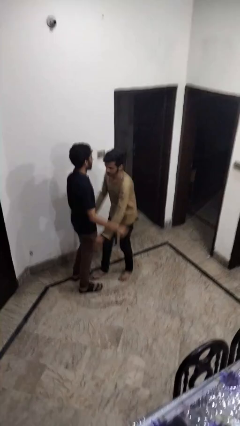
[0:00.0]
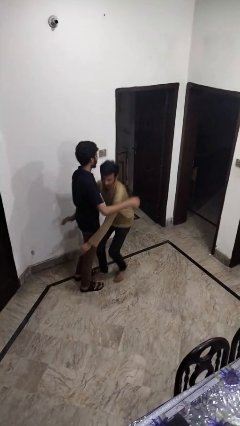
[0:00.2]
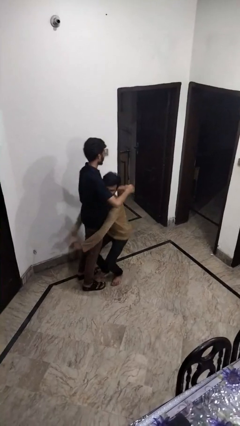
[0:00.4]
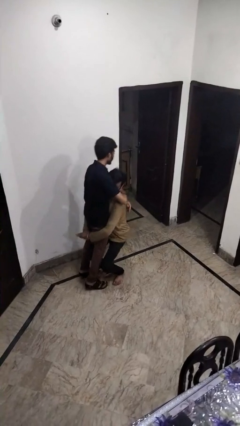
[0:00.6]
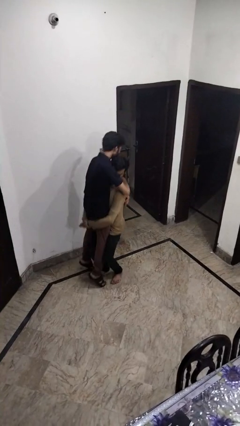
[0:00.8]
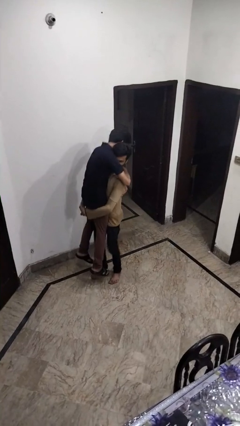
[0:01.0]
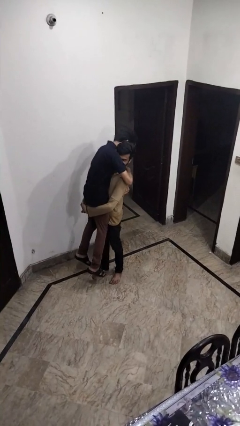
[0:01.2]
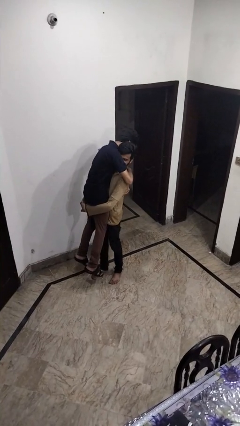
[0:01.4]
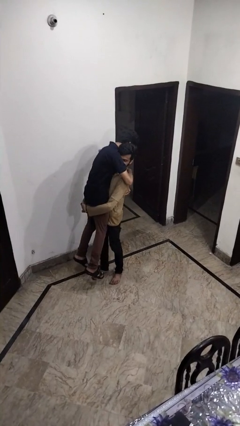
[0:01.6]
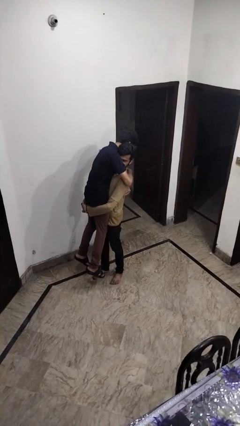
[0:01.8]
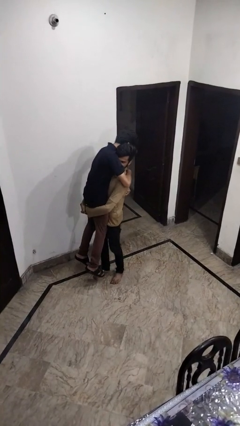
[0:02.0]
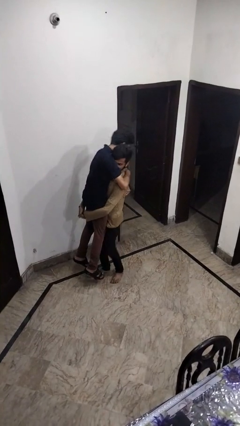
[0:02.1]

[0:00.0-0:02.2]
person picks up person

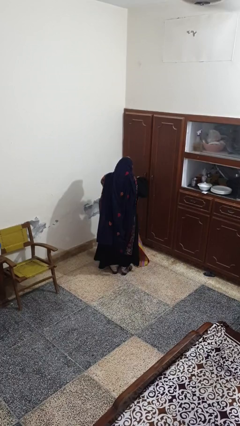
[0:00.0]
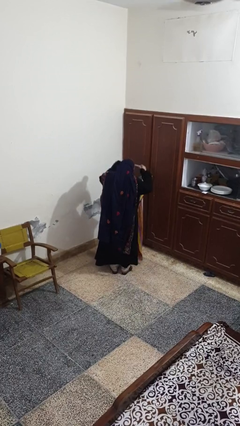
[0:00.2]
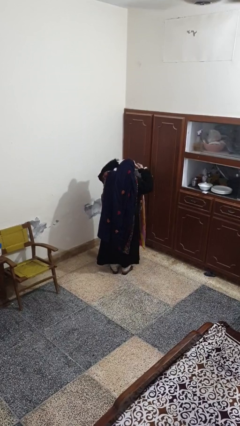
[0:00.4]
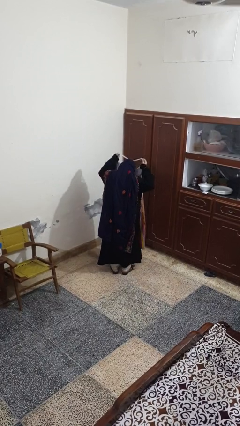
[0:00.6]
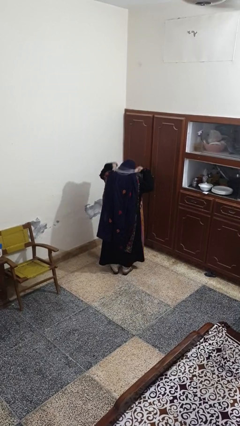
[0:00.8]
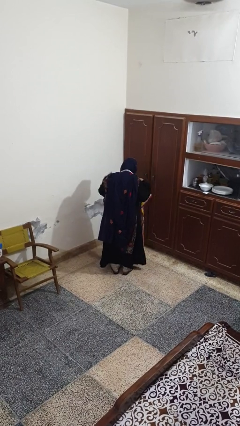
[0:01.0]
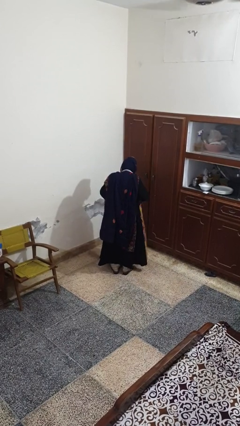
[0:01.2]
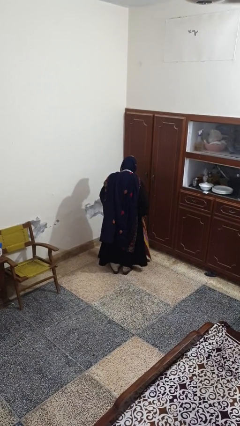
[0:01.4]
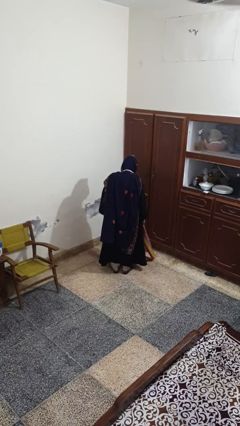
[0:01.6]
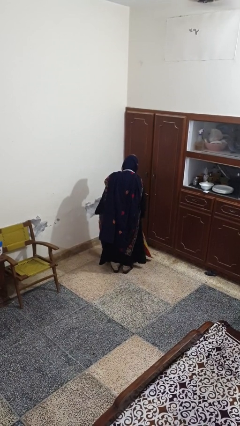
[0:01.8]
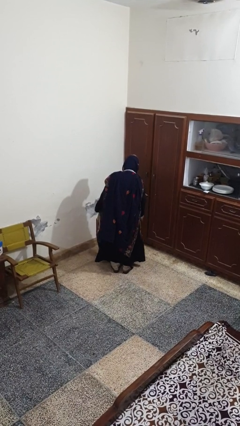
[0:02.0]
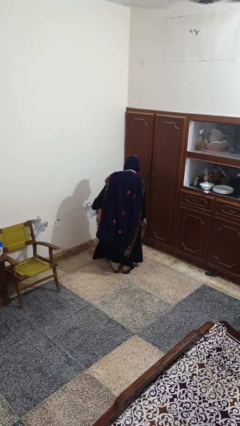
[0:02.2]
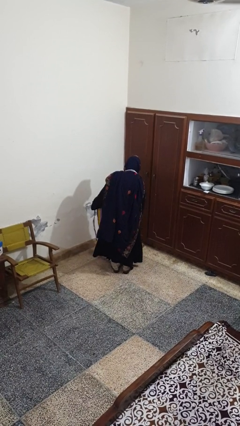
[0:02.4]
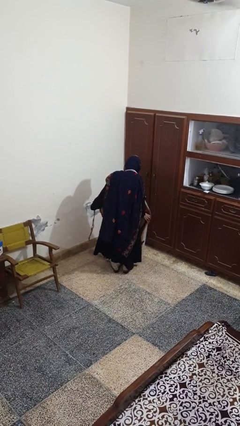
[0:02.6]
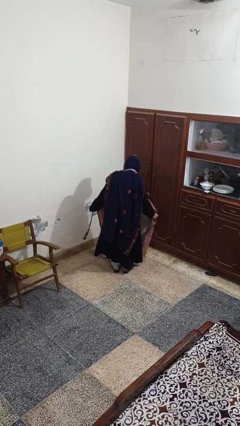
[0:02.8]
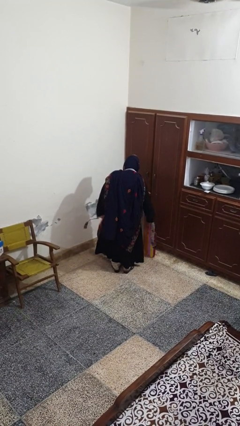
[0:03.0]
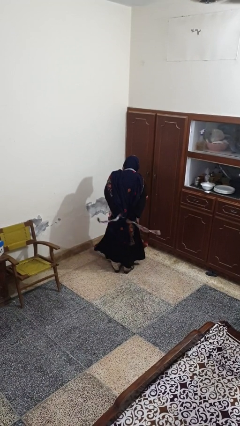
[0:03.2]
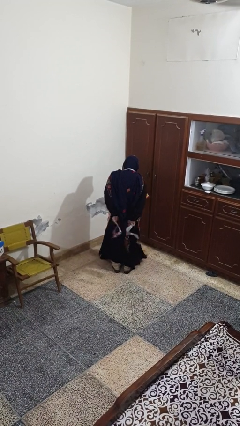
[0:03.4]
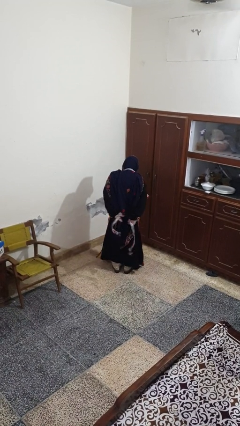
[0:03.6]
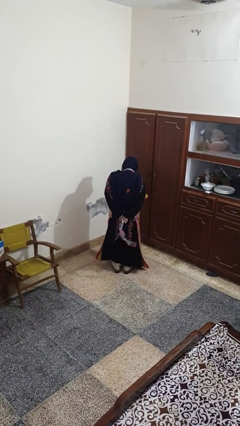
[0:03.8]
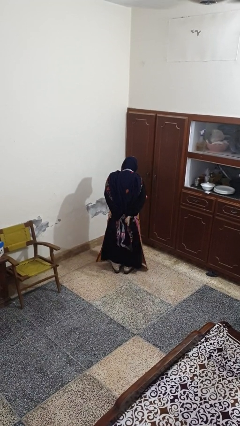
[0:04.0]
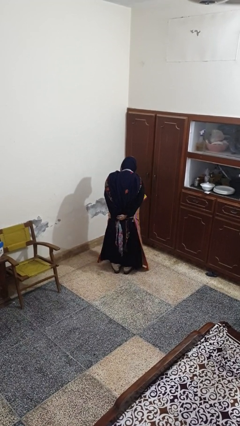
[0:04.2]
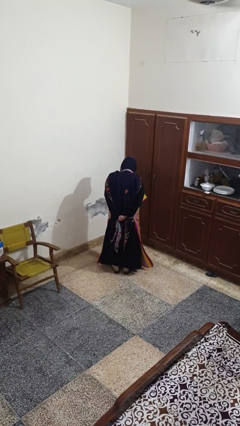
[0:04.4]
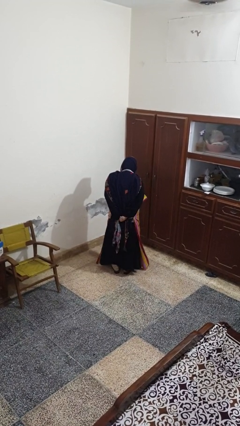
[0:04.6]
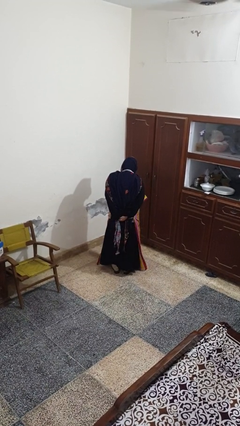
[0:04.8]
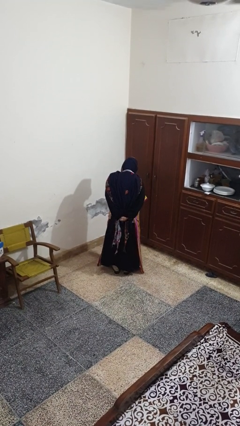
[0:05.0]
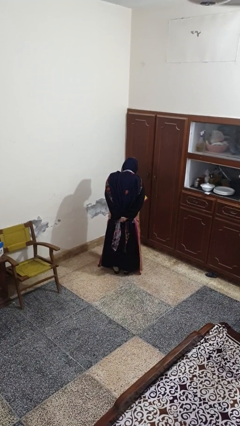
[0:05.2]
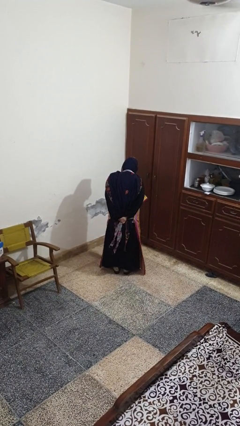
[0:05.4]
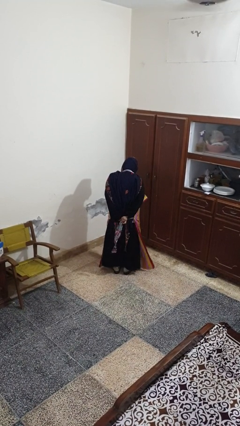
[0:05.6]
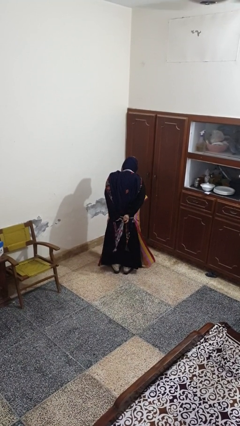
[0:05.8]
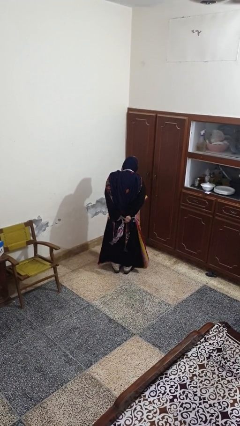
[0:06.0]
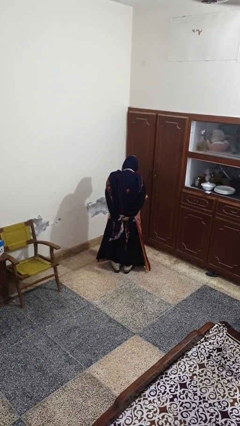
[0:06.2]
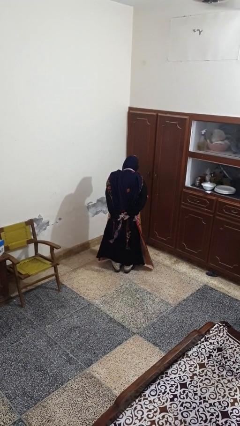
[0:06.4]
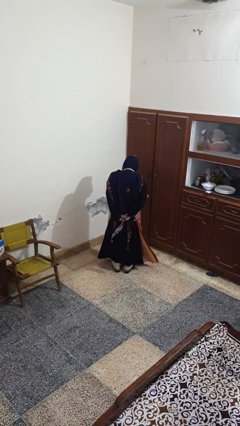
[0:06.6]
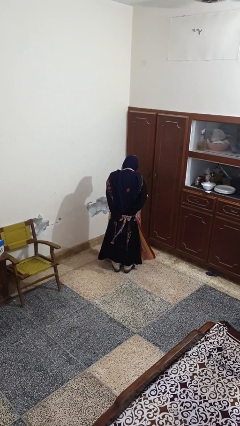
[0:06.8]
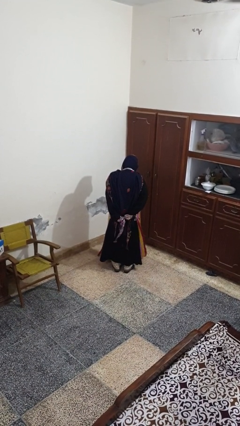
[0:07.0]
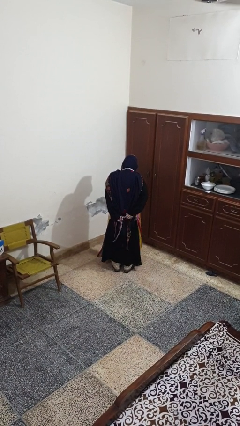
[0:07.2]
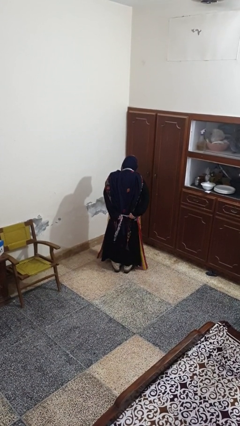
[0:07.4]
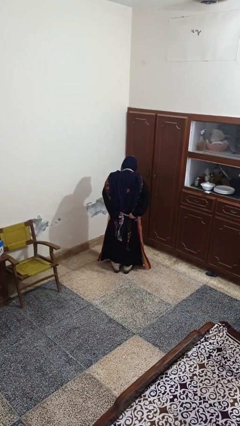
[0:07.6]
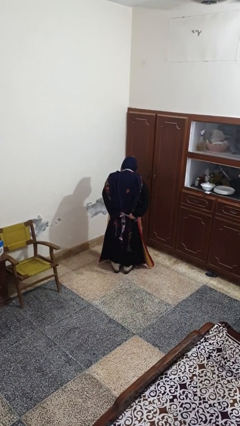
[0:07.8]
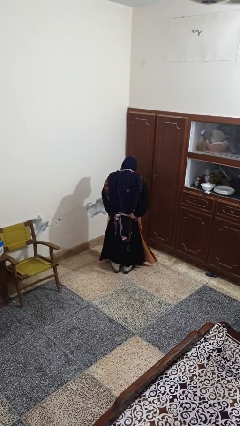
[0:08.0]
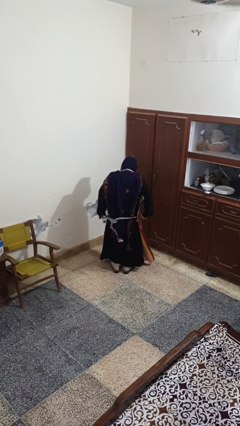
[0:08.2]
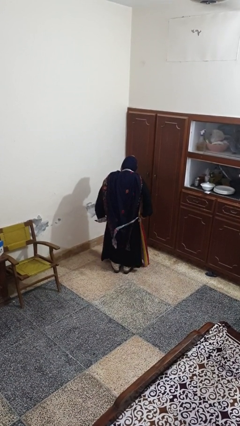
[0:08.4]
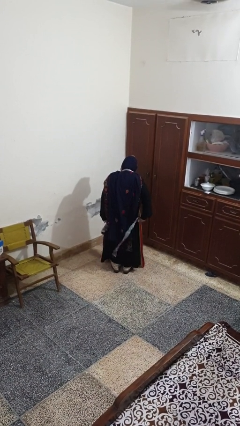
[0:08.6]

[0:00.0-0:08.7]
person puts on apron

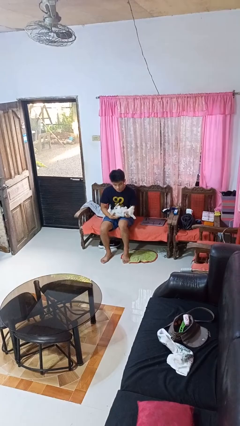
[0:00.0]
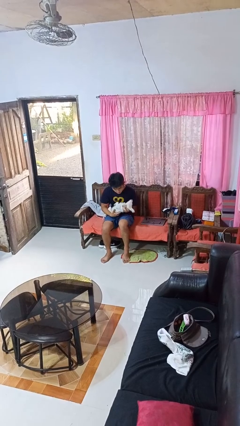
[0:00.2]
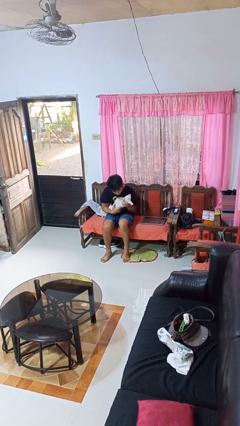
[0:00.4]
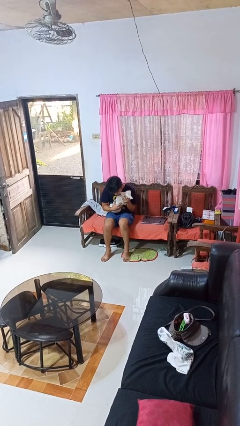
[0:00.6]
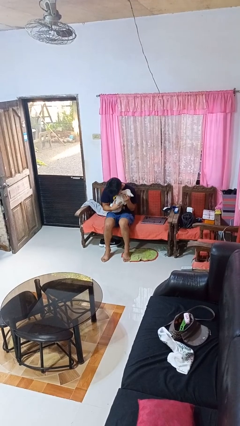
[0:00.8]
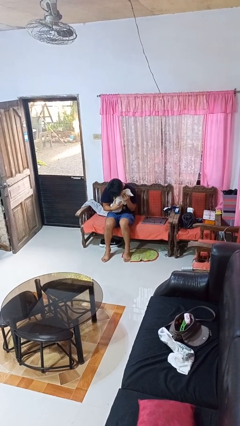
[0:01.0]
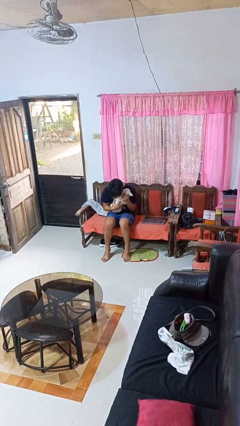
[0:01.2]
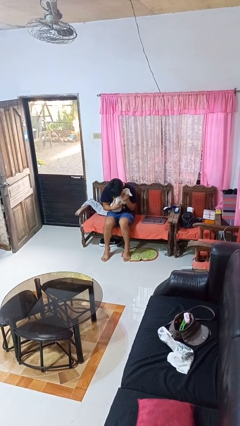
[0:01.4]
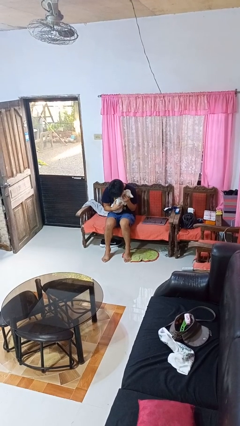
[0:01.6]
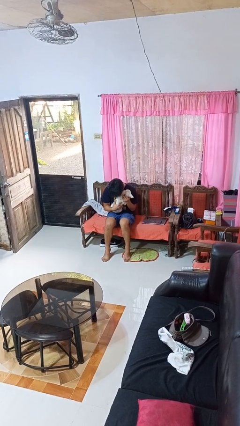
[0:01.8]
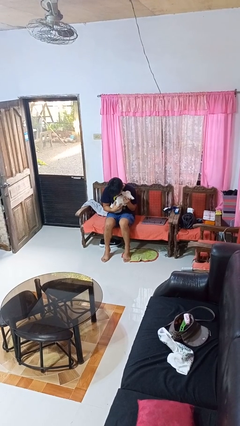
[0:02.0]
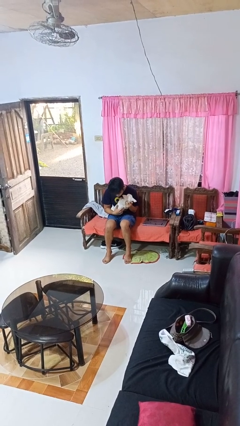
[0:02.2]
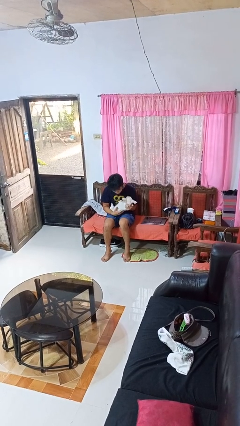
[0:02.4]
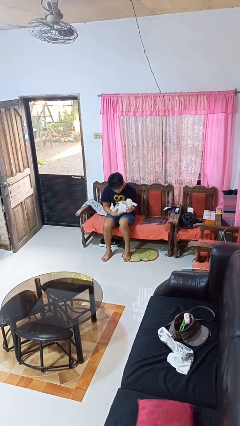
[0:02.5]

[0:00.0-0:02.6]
person hugs dog

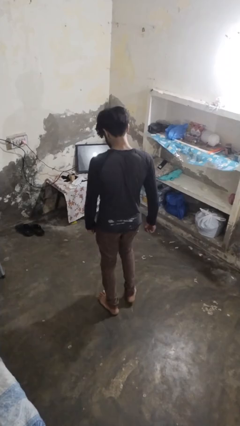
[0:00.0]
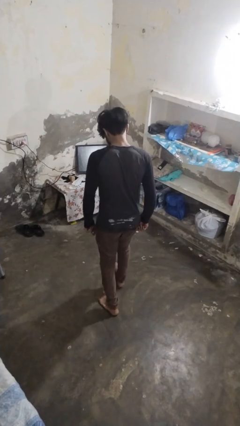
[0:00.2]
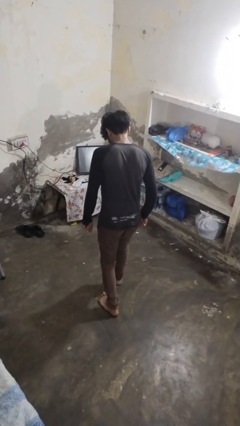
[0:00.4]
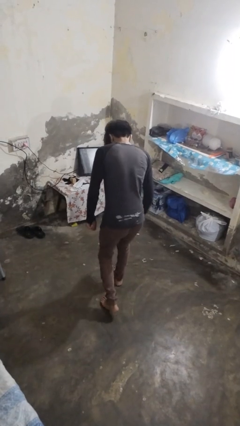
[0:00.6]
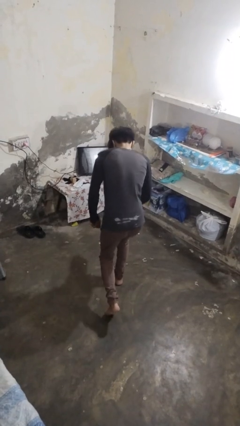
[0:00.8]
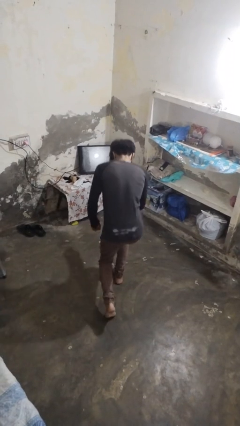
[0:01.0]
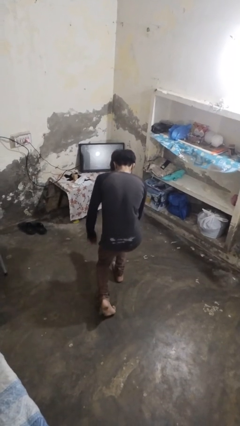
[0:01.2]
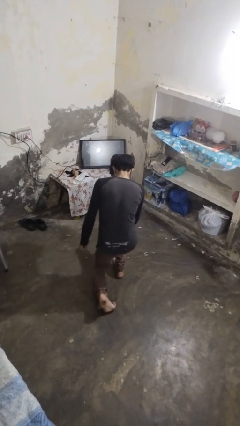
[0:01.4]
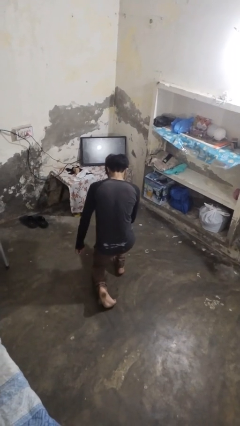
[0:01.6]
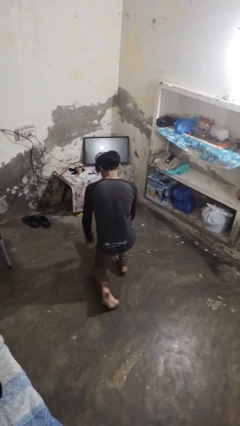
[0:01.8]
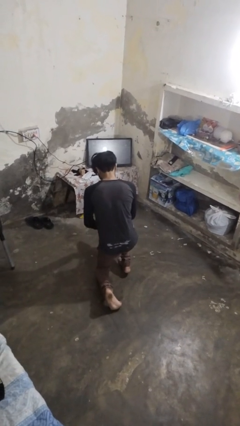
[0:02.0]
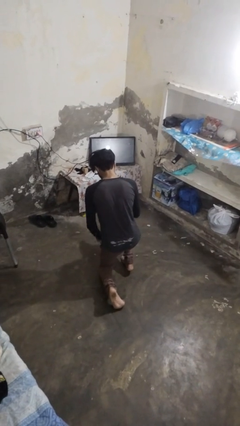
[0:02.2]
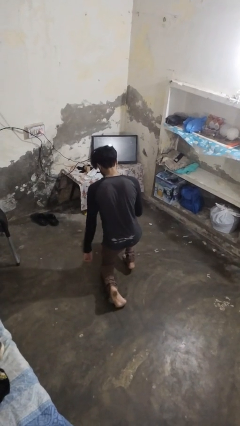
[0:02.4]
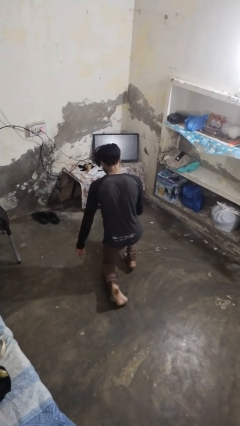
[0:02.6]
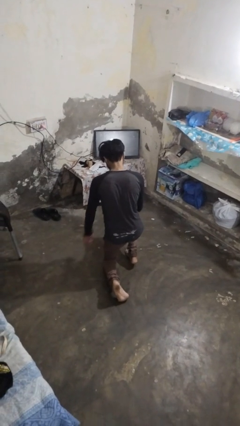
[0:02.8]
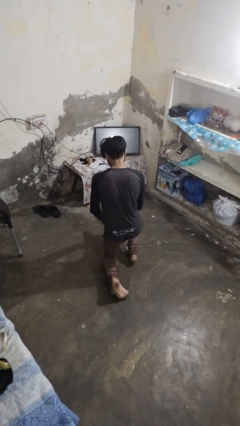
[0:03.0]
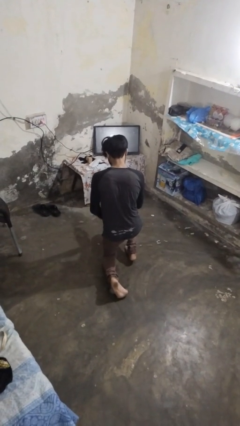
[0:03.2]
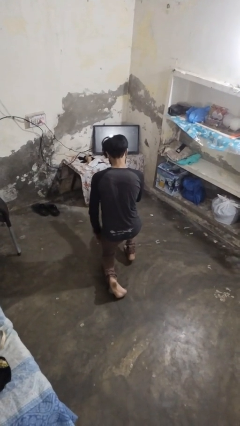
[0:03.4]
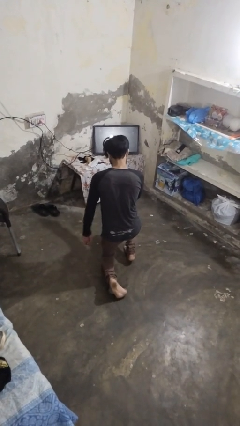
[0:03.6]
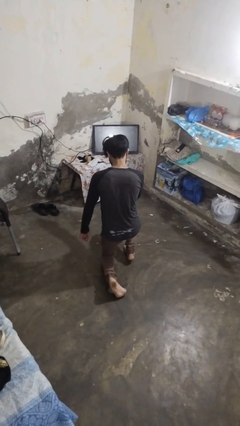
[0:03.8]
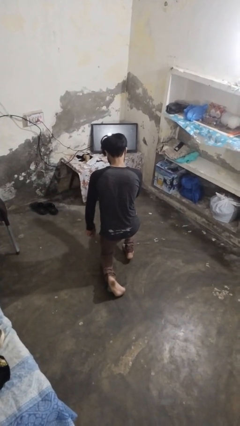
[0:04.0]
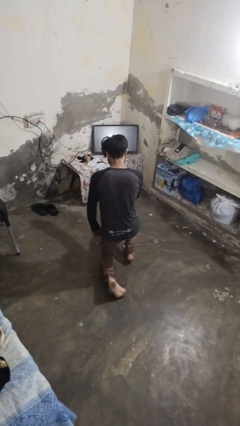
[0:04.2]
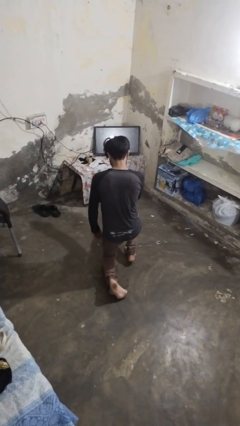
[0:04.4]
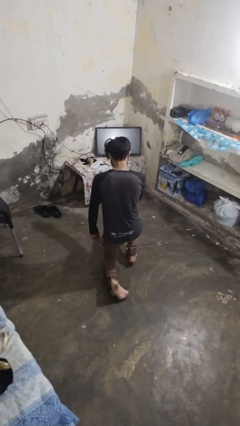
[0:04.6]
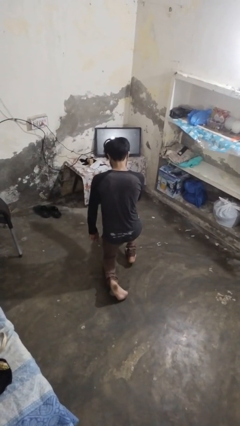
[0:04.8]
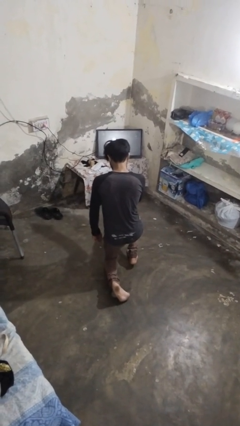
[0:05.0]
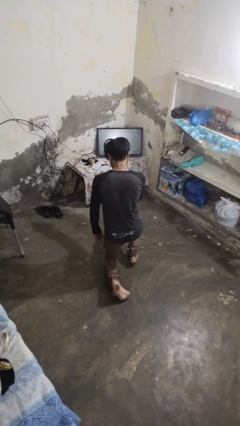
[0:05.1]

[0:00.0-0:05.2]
person stands up from floor
